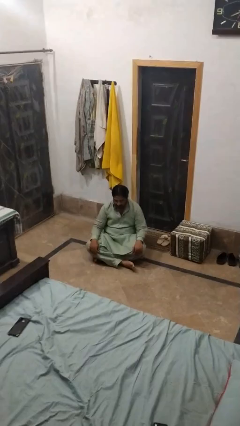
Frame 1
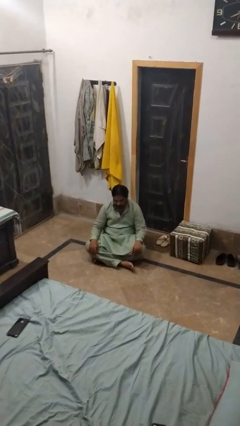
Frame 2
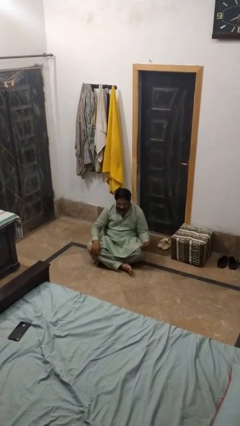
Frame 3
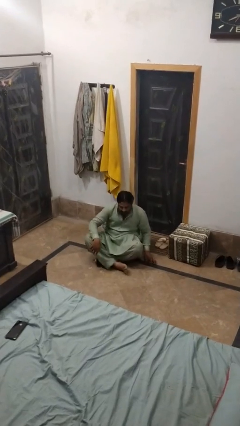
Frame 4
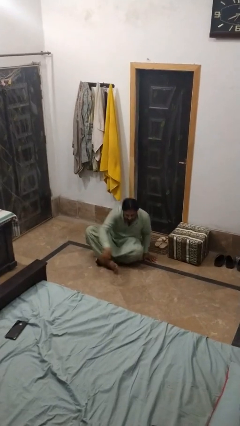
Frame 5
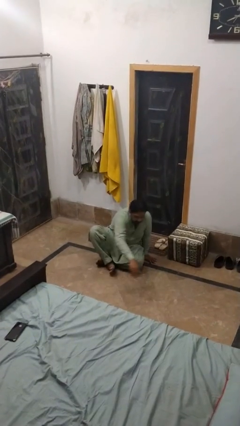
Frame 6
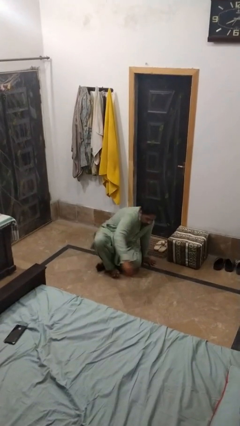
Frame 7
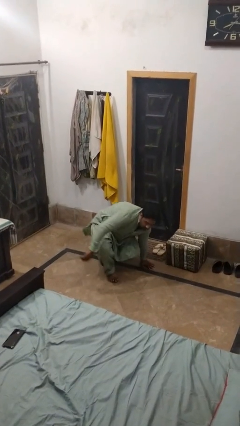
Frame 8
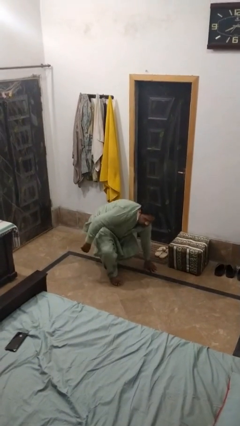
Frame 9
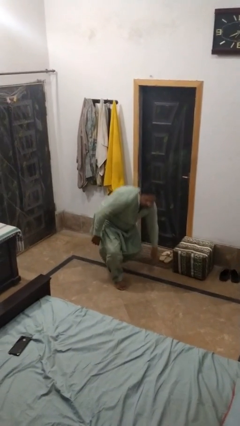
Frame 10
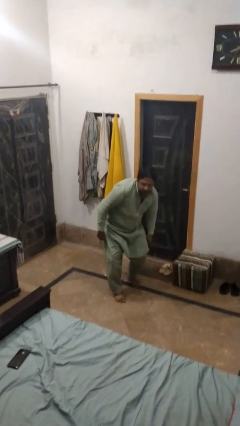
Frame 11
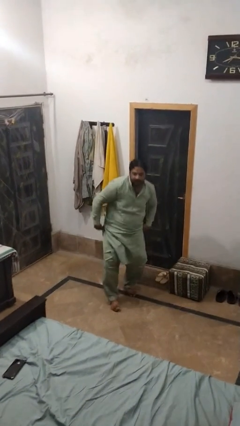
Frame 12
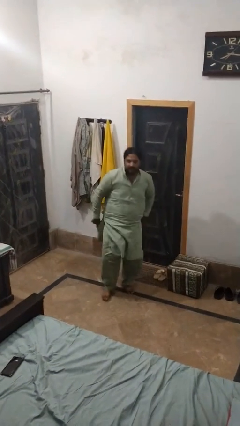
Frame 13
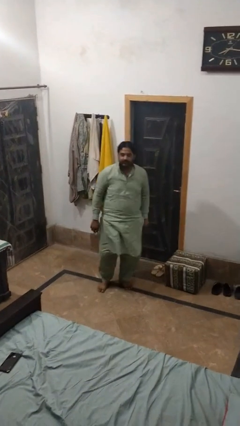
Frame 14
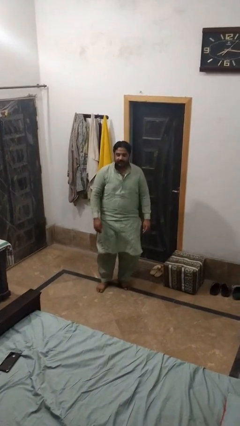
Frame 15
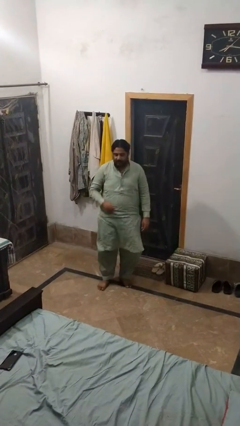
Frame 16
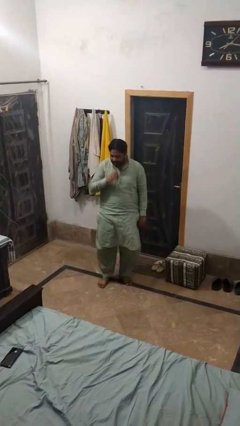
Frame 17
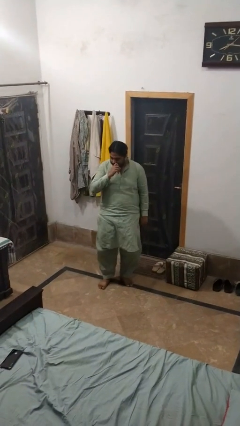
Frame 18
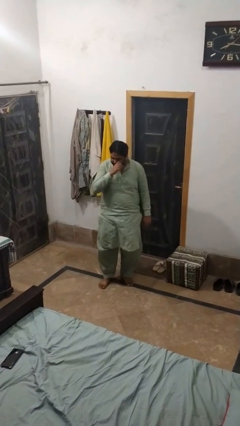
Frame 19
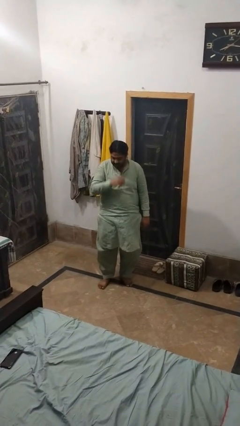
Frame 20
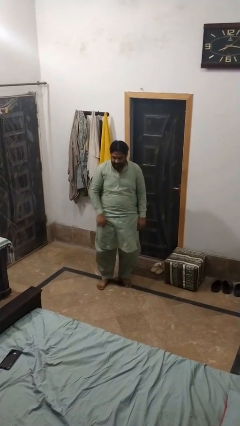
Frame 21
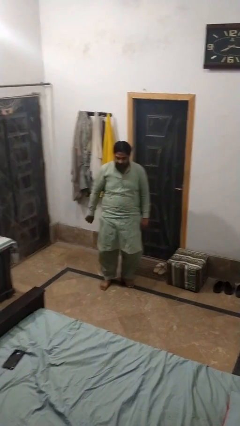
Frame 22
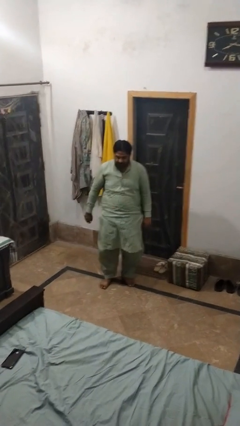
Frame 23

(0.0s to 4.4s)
person stands up from floor

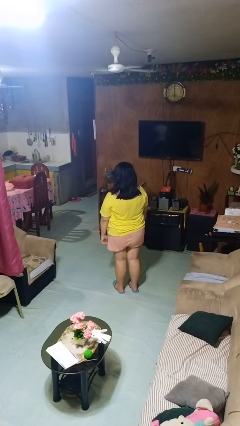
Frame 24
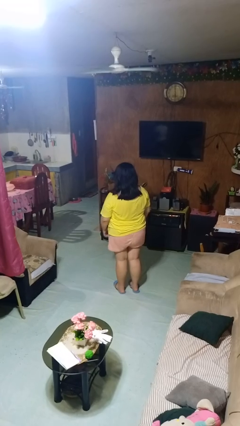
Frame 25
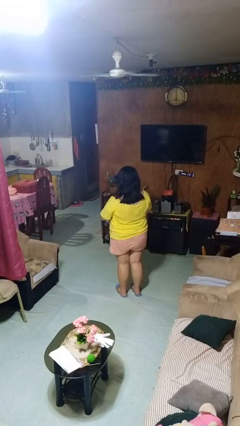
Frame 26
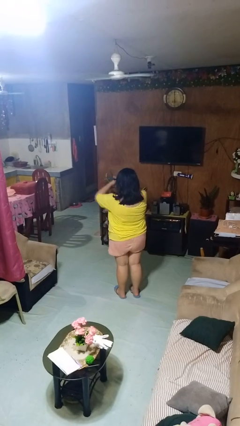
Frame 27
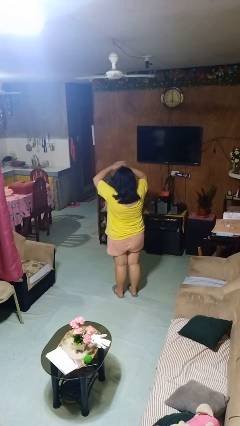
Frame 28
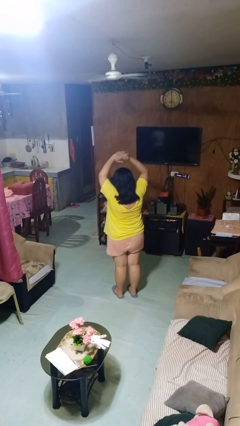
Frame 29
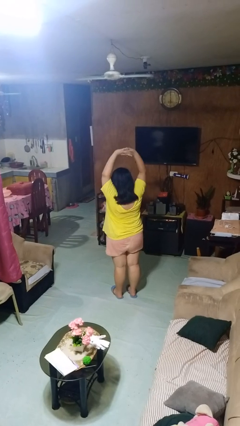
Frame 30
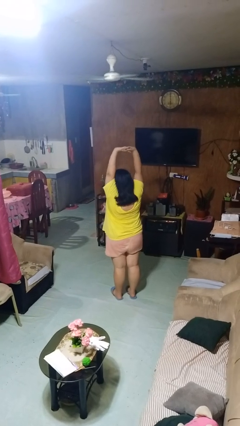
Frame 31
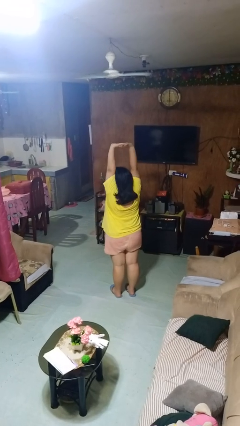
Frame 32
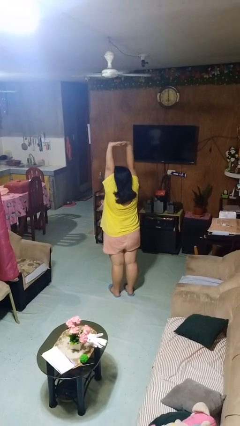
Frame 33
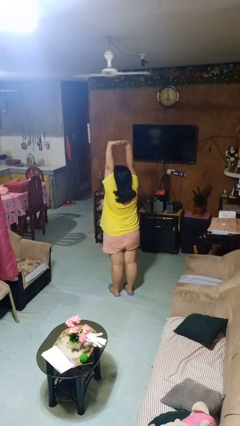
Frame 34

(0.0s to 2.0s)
person stretches arms over head

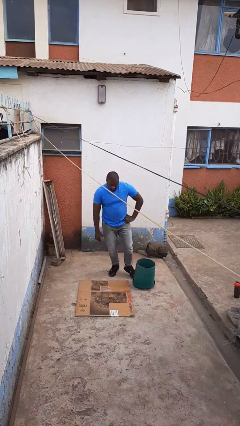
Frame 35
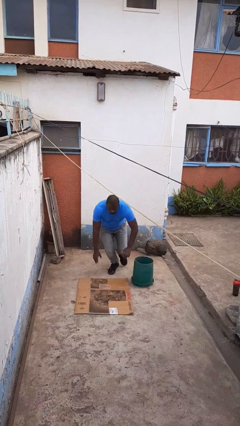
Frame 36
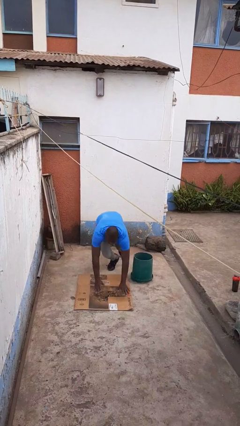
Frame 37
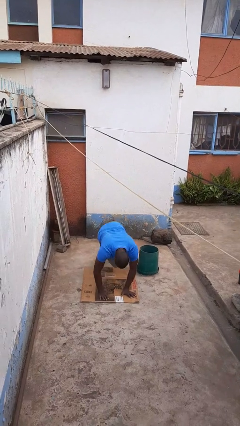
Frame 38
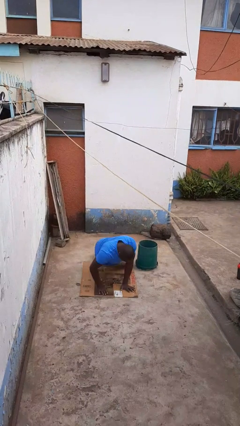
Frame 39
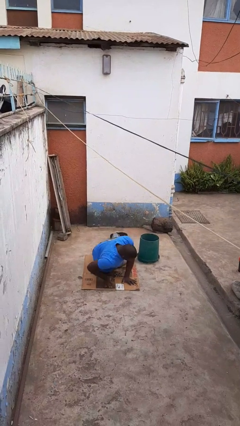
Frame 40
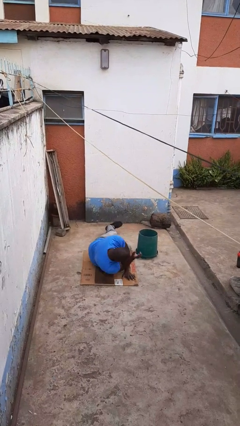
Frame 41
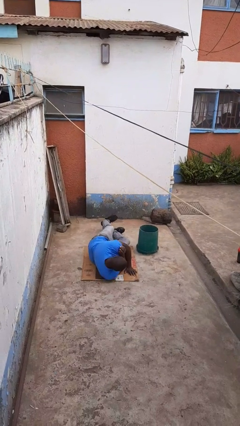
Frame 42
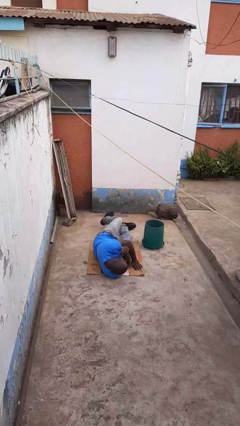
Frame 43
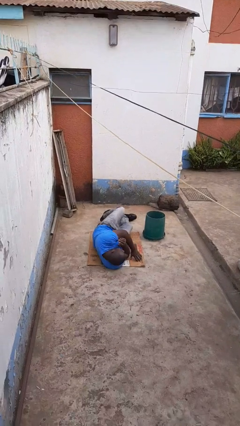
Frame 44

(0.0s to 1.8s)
person trips on object on floor

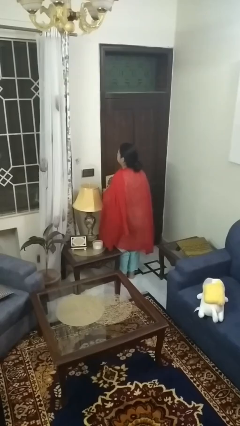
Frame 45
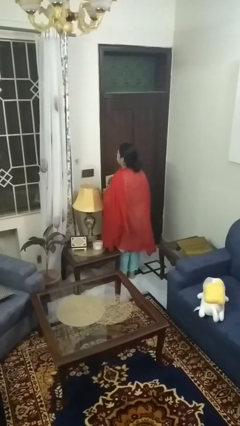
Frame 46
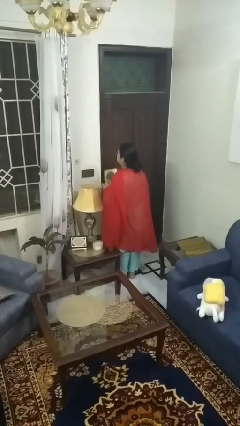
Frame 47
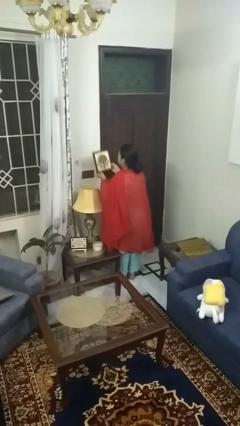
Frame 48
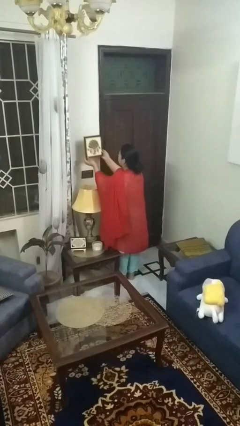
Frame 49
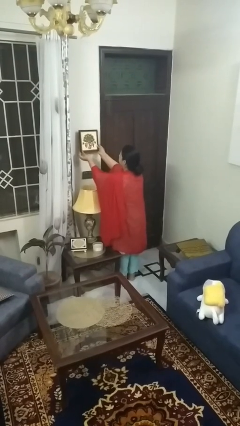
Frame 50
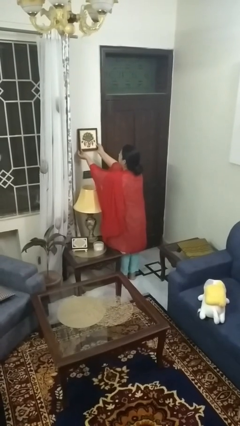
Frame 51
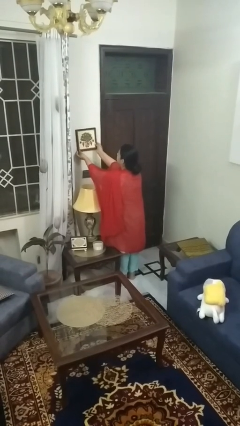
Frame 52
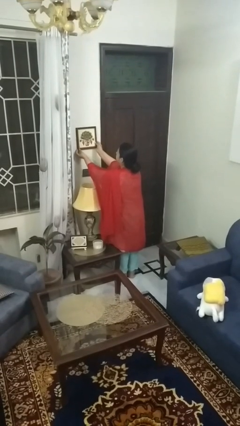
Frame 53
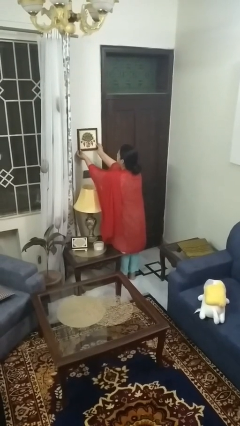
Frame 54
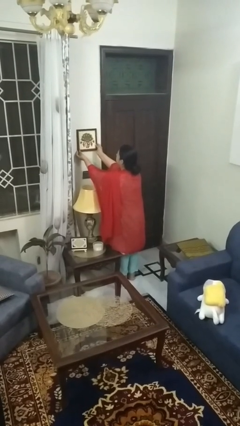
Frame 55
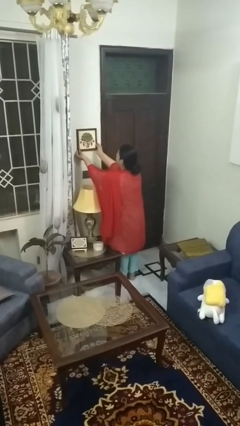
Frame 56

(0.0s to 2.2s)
person puts up picture frame

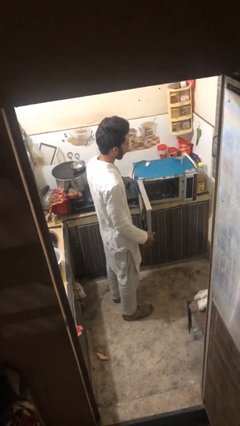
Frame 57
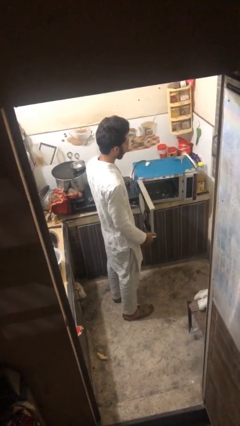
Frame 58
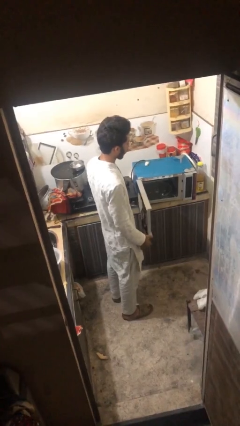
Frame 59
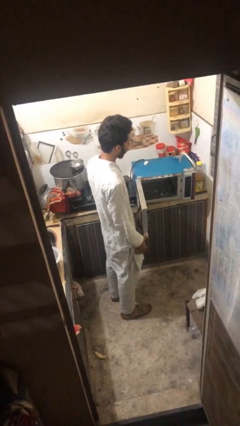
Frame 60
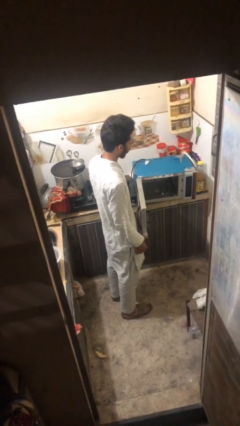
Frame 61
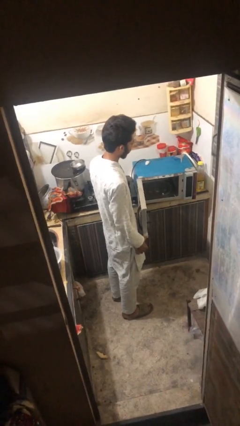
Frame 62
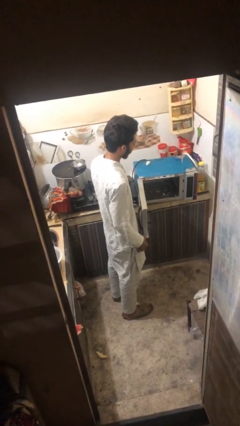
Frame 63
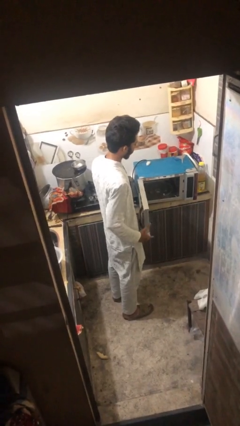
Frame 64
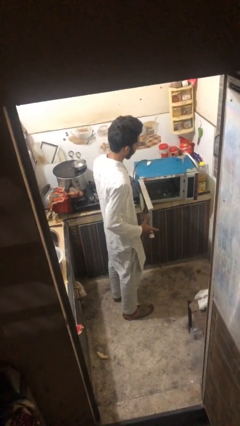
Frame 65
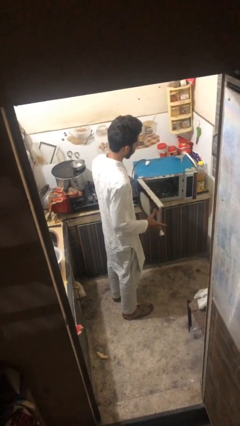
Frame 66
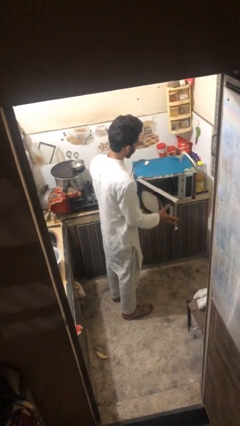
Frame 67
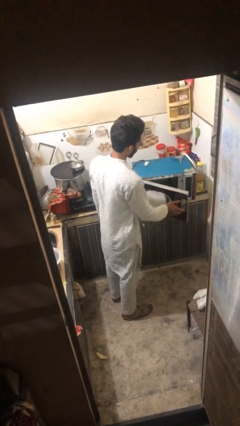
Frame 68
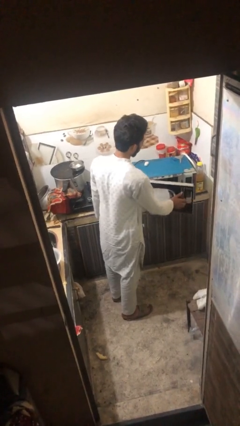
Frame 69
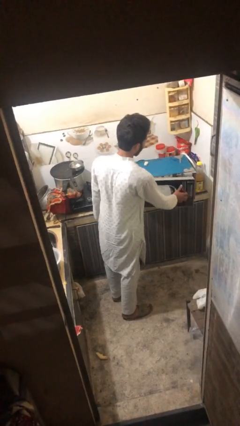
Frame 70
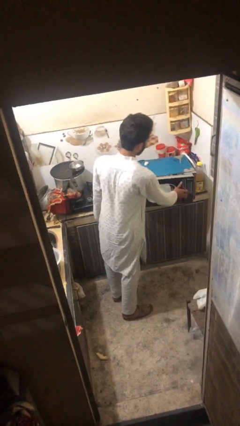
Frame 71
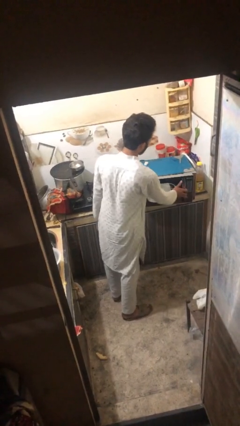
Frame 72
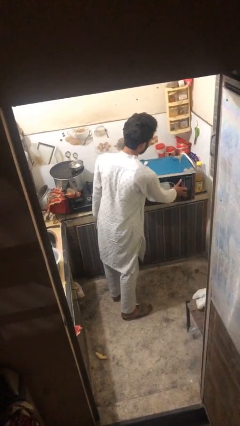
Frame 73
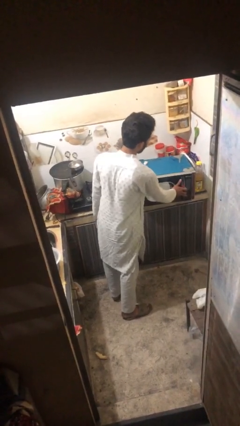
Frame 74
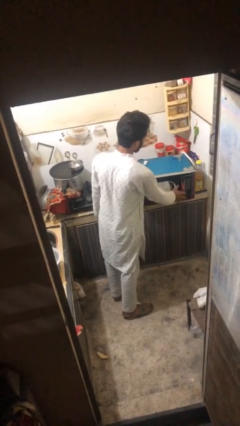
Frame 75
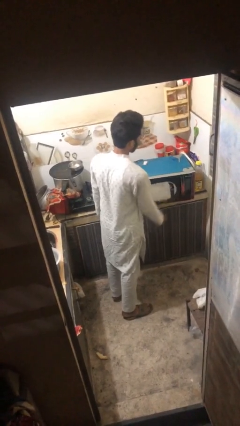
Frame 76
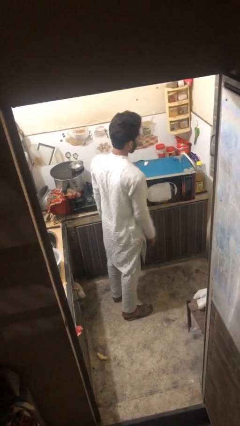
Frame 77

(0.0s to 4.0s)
person closes oven door

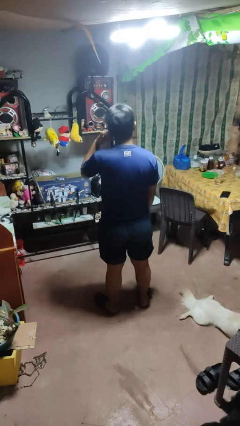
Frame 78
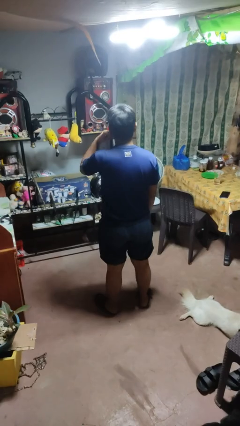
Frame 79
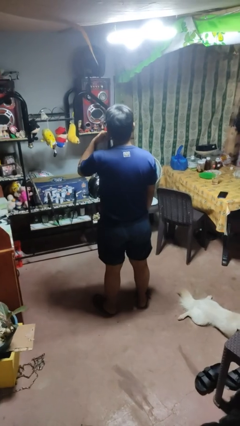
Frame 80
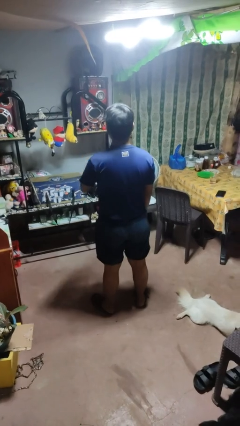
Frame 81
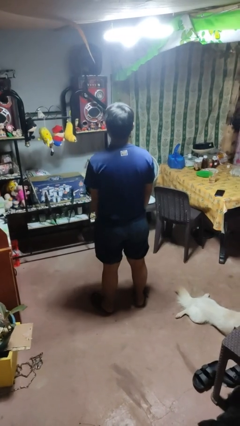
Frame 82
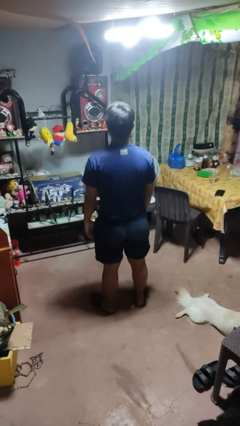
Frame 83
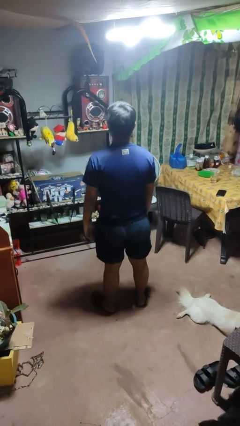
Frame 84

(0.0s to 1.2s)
person gestures call me

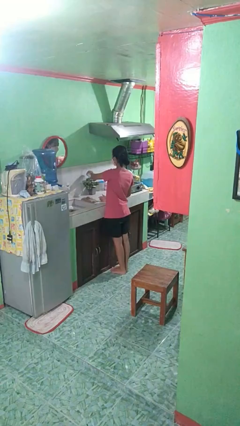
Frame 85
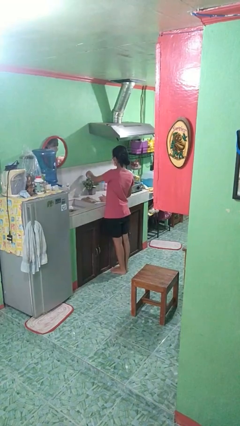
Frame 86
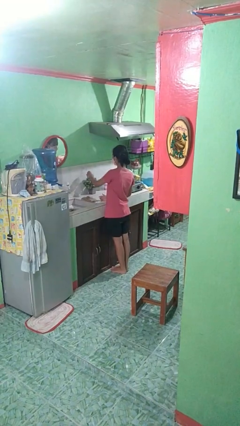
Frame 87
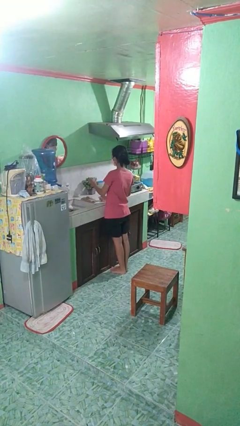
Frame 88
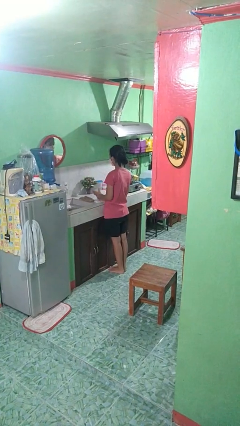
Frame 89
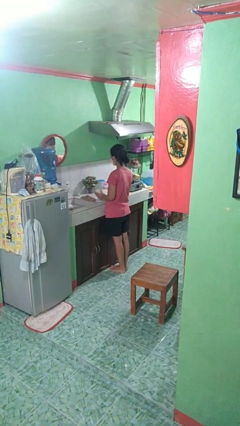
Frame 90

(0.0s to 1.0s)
person waters houseplant
